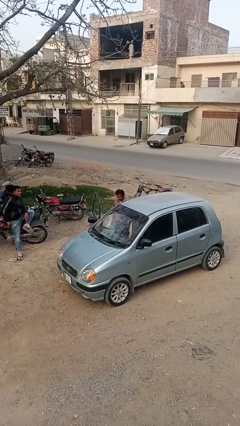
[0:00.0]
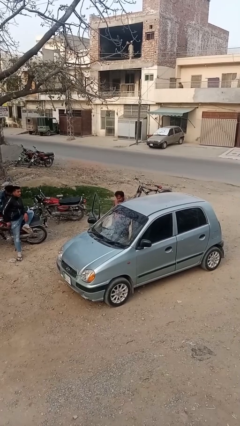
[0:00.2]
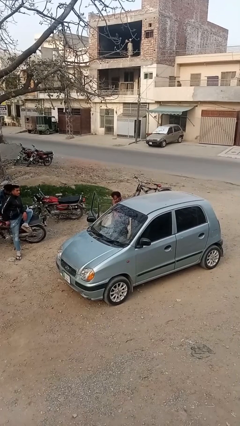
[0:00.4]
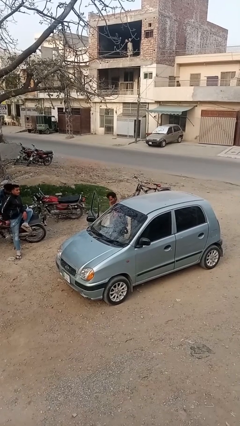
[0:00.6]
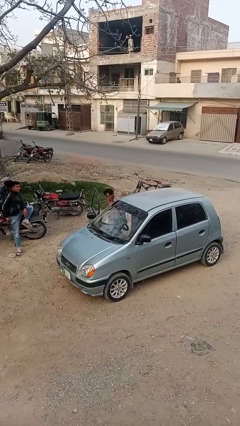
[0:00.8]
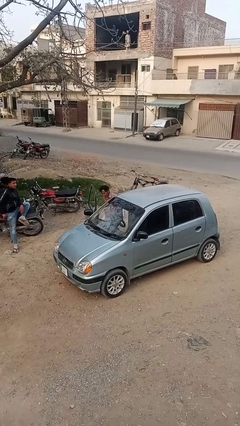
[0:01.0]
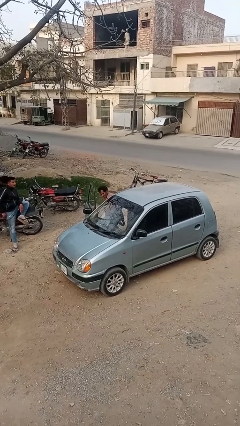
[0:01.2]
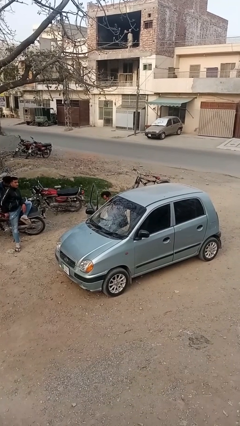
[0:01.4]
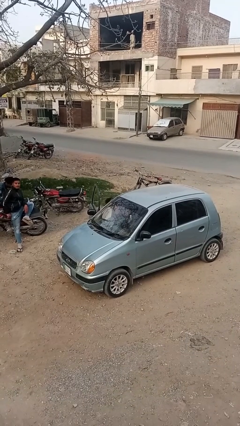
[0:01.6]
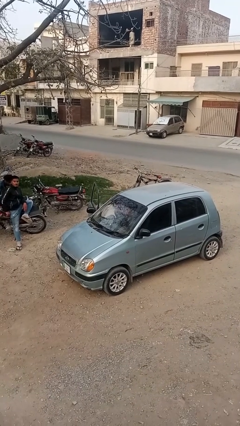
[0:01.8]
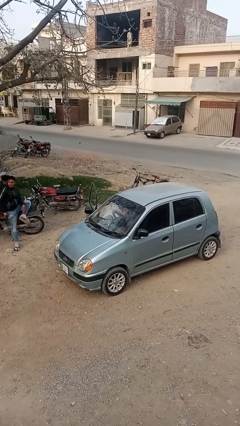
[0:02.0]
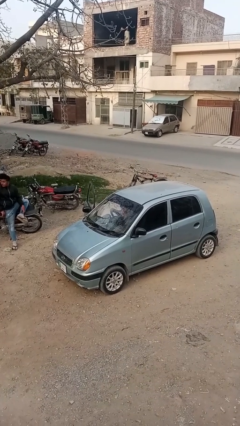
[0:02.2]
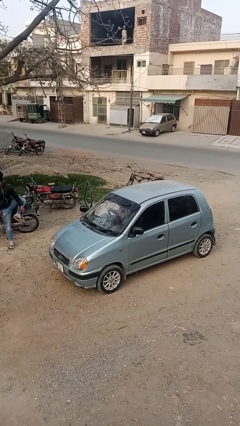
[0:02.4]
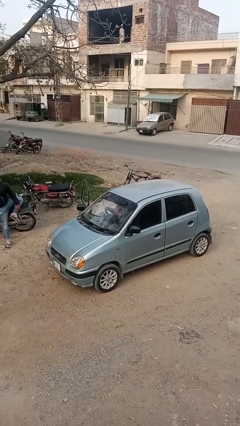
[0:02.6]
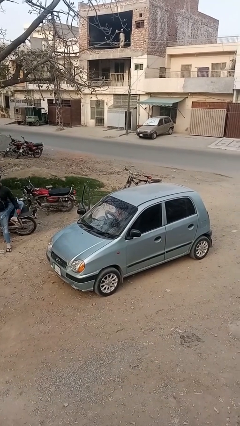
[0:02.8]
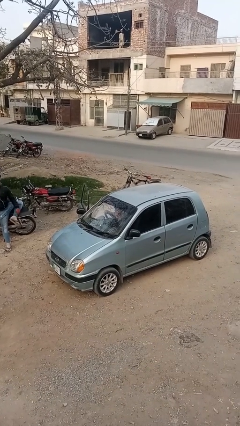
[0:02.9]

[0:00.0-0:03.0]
person enters car

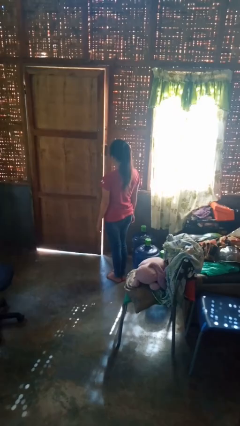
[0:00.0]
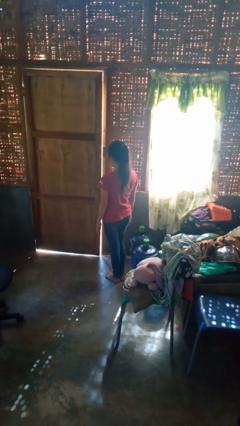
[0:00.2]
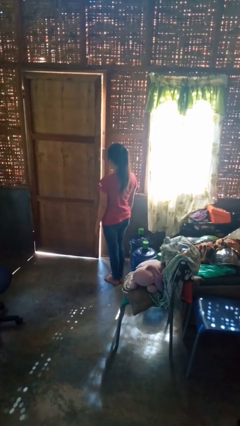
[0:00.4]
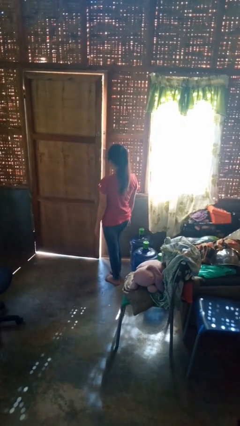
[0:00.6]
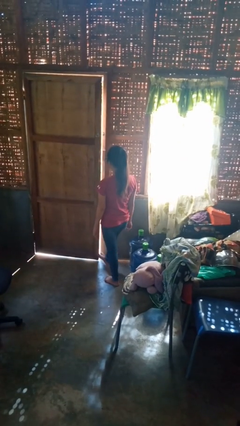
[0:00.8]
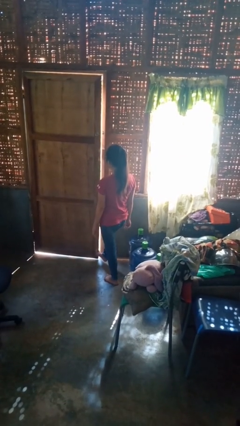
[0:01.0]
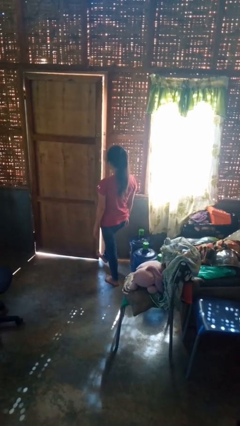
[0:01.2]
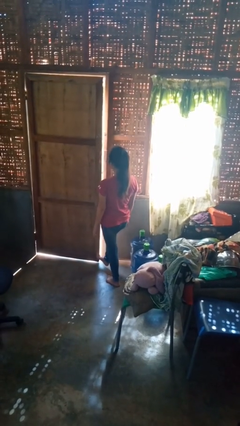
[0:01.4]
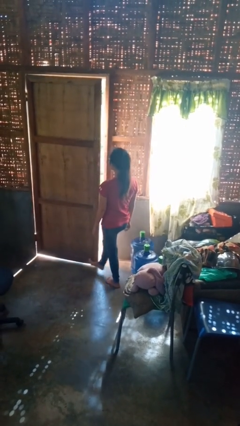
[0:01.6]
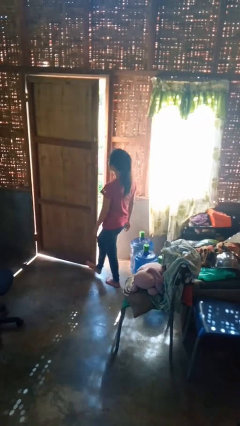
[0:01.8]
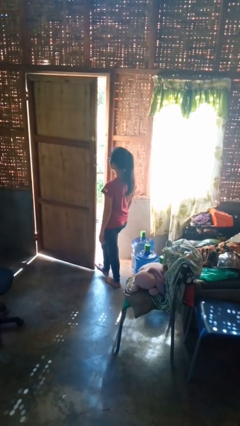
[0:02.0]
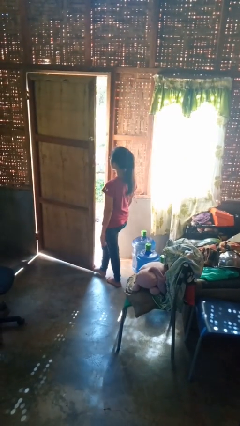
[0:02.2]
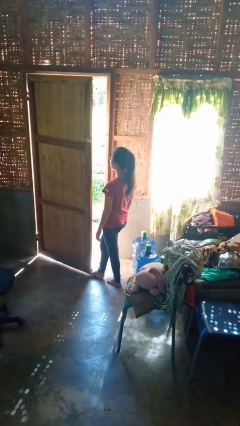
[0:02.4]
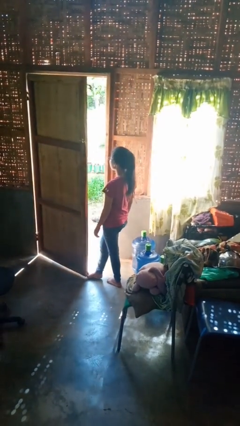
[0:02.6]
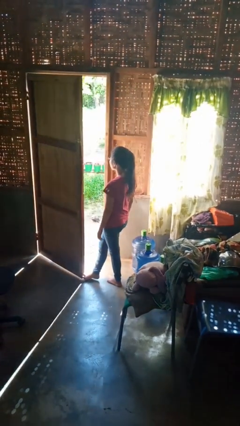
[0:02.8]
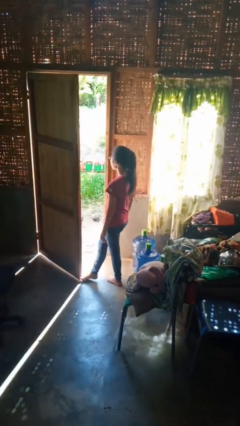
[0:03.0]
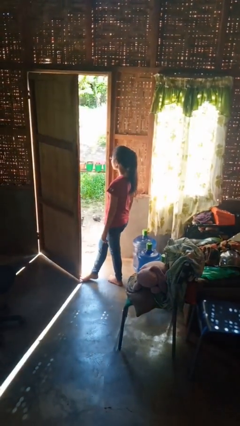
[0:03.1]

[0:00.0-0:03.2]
person opens facility door

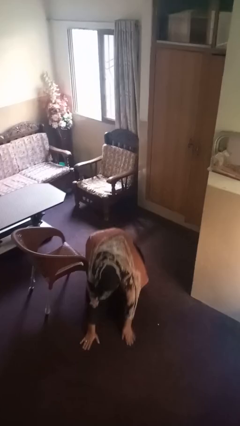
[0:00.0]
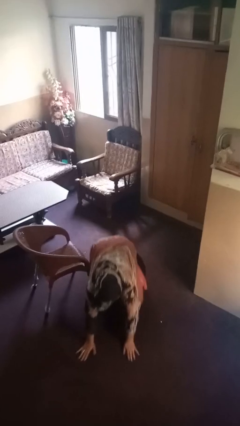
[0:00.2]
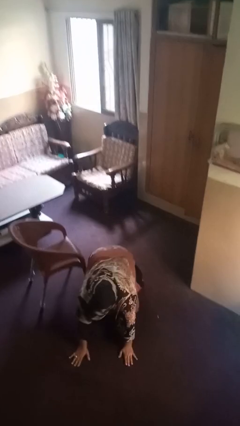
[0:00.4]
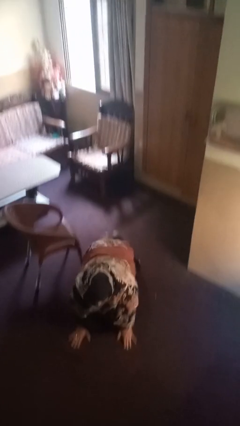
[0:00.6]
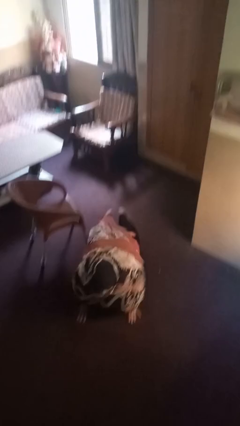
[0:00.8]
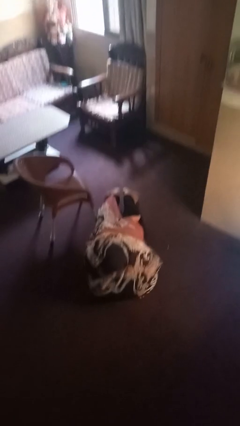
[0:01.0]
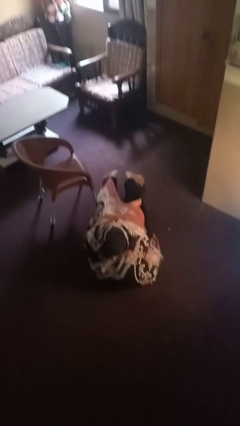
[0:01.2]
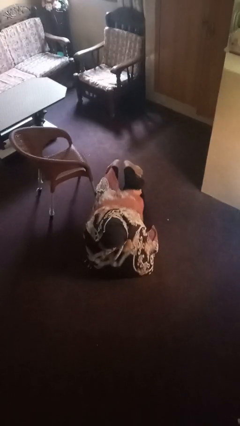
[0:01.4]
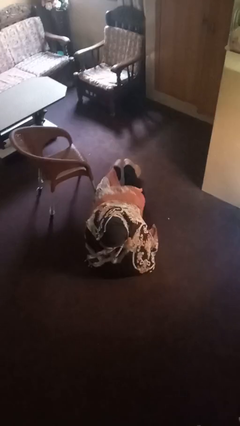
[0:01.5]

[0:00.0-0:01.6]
person lies down on floor

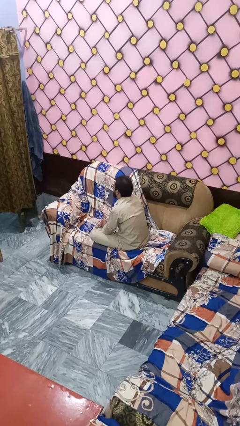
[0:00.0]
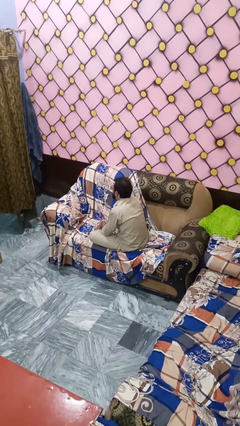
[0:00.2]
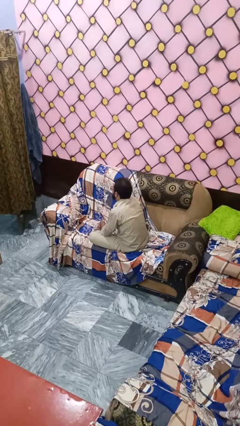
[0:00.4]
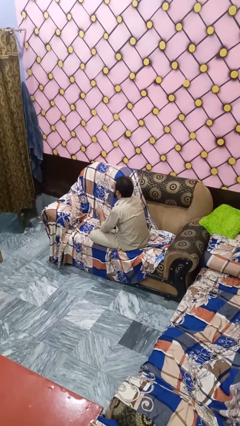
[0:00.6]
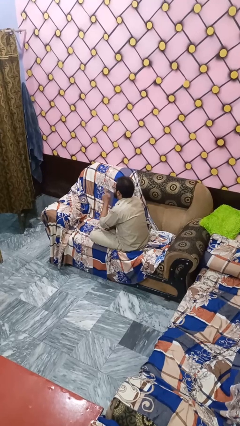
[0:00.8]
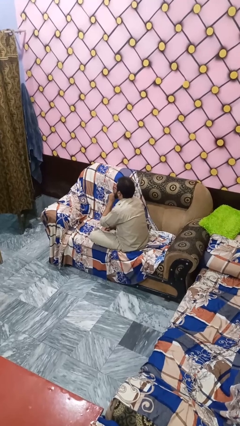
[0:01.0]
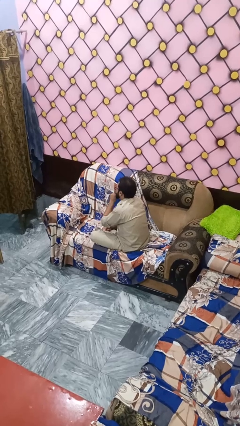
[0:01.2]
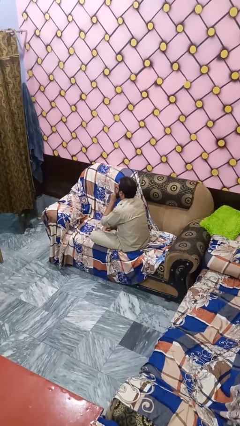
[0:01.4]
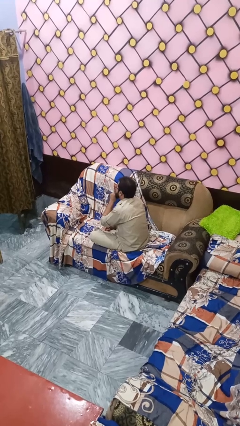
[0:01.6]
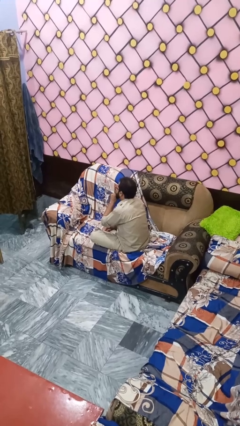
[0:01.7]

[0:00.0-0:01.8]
person gestures be quiet

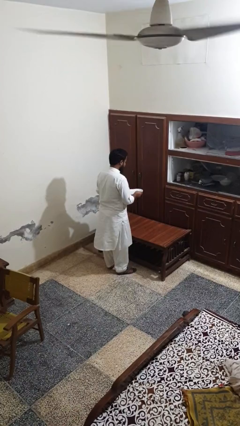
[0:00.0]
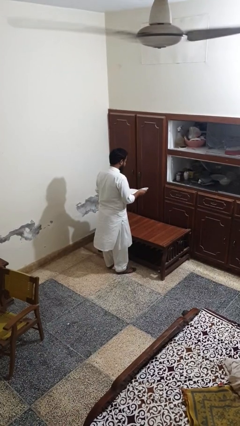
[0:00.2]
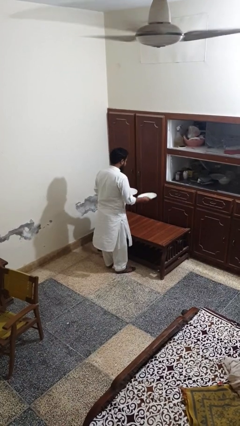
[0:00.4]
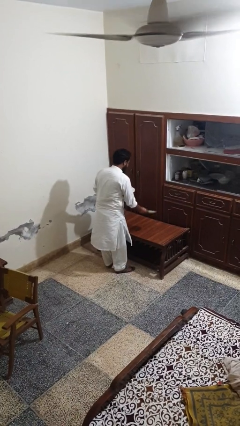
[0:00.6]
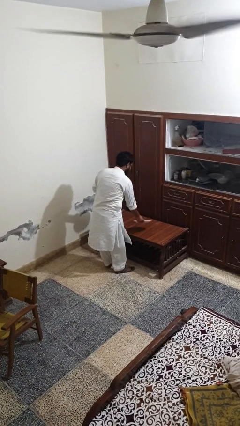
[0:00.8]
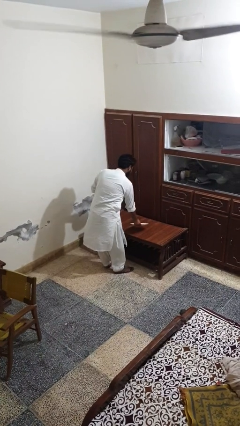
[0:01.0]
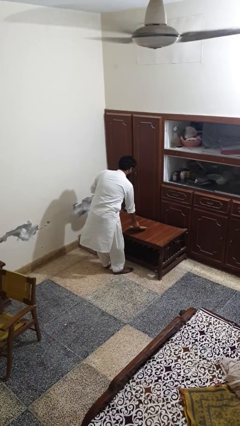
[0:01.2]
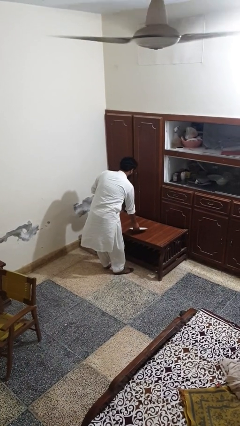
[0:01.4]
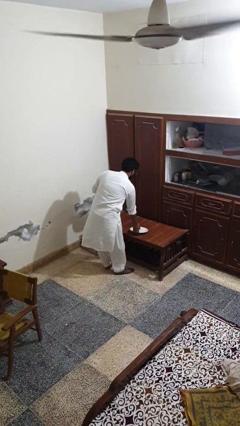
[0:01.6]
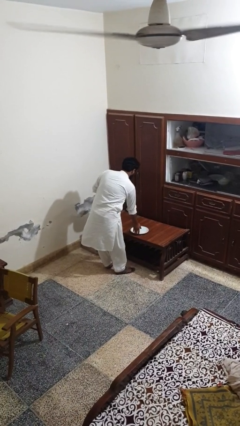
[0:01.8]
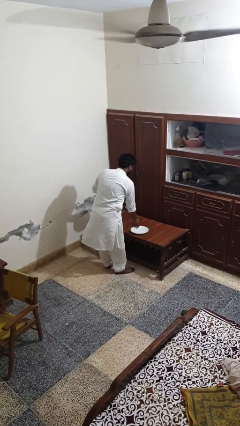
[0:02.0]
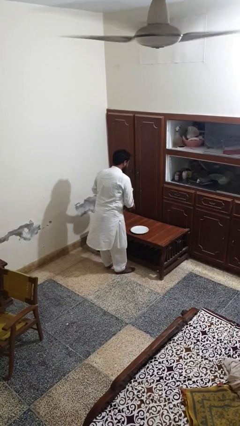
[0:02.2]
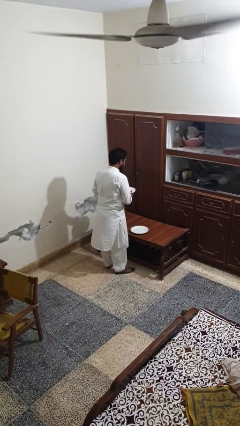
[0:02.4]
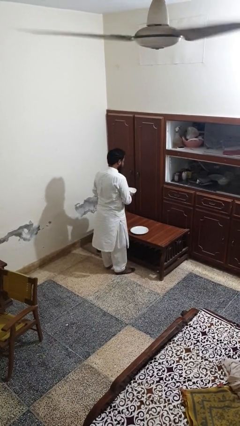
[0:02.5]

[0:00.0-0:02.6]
person sets table

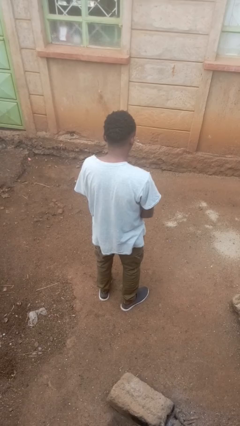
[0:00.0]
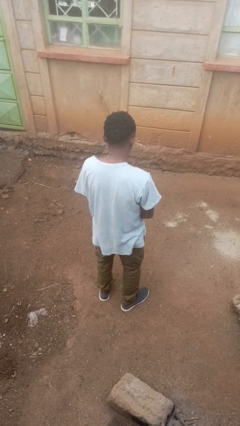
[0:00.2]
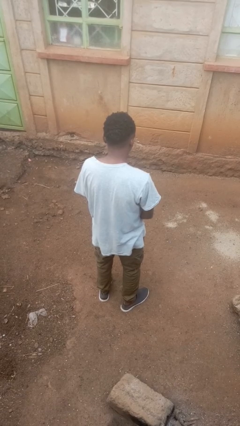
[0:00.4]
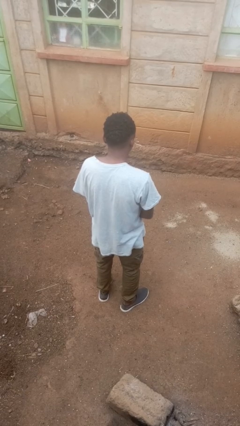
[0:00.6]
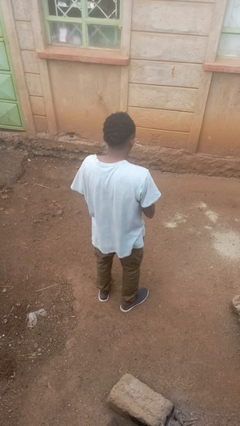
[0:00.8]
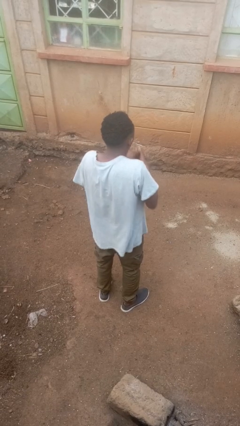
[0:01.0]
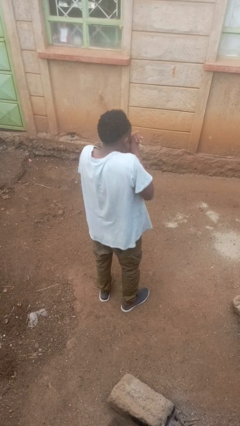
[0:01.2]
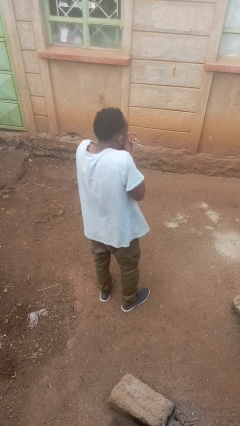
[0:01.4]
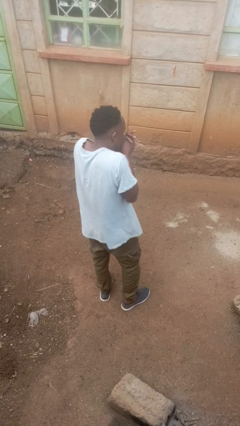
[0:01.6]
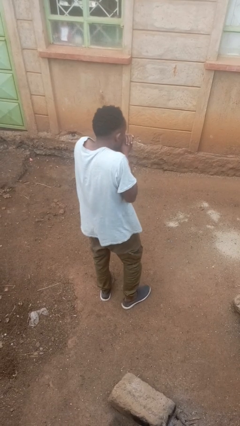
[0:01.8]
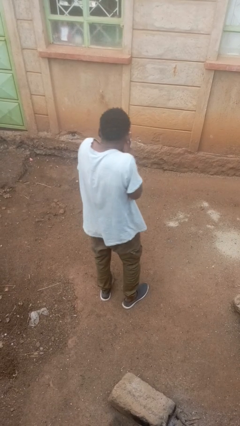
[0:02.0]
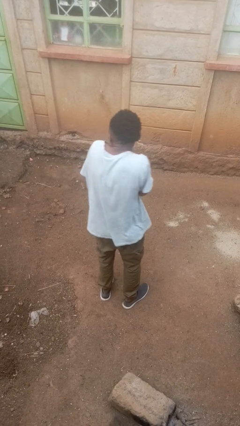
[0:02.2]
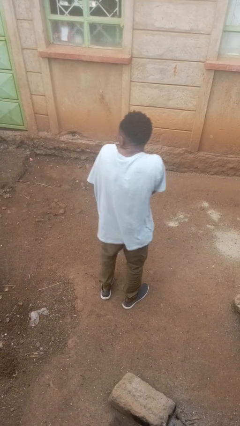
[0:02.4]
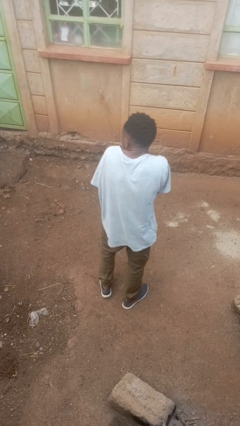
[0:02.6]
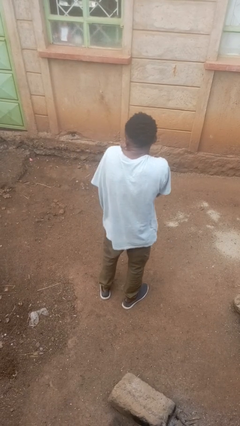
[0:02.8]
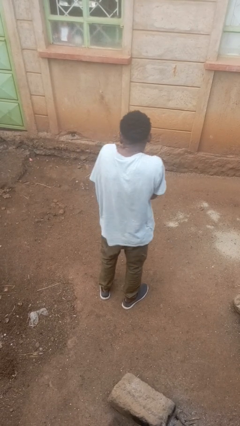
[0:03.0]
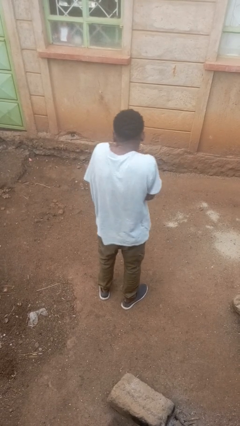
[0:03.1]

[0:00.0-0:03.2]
person blows into hands

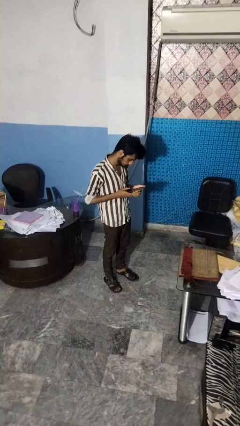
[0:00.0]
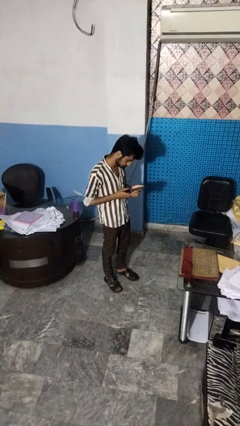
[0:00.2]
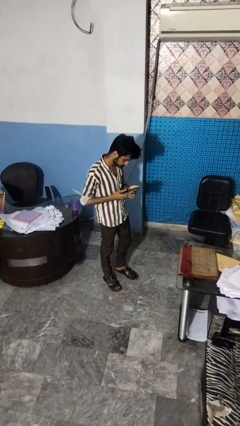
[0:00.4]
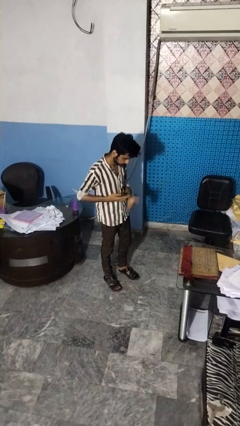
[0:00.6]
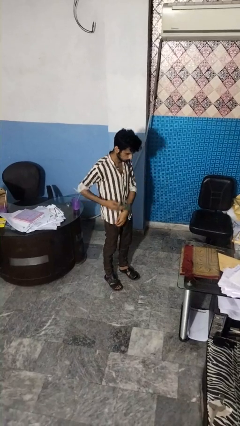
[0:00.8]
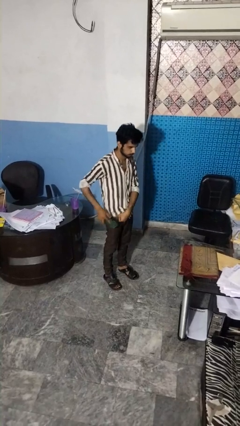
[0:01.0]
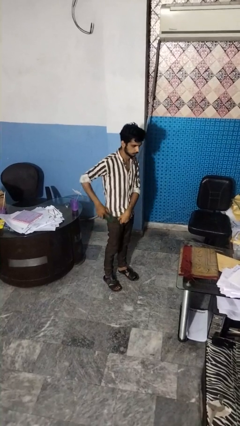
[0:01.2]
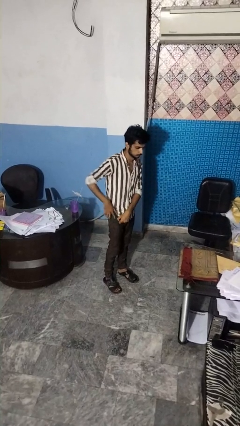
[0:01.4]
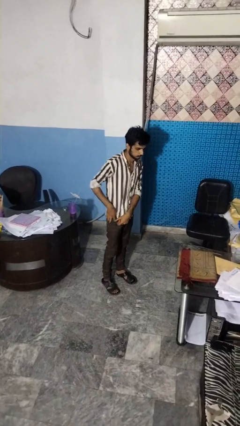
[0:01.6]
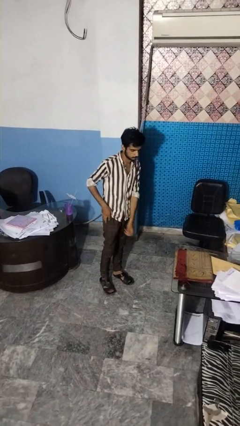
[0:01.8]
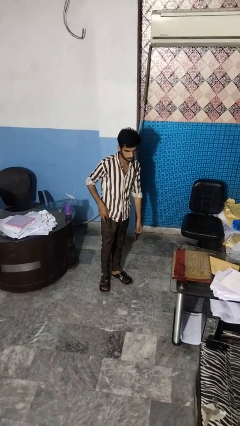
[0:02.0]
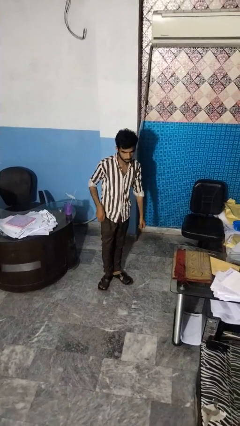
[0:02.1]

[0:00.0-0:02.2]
person puts phone into pocket
